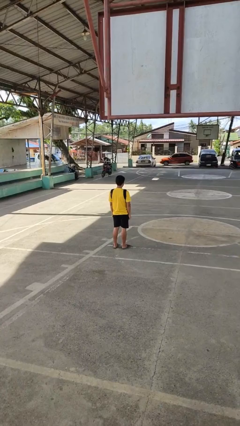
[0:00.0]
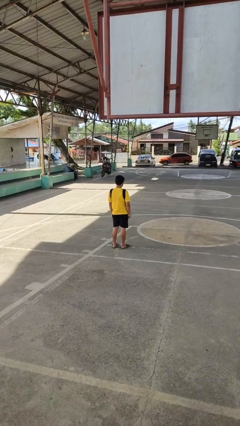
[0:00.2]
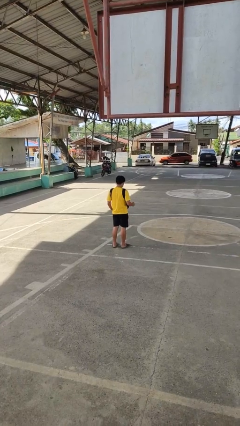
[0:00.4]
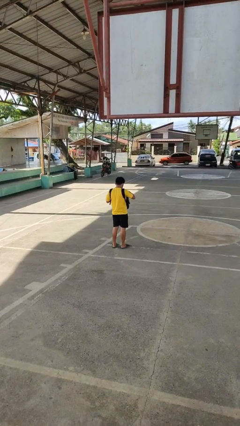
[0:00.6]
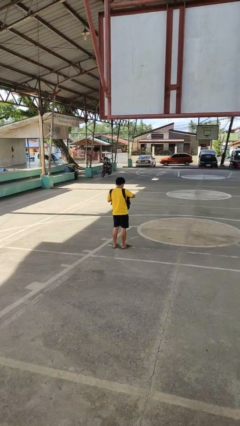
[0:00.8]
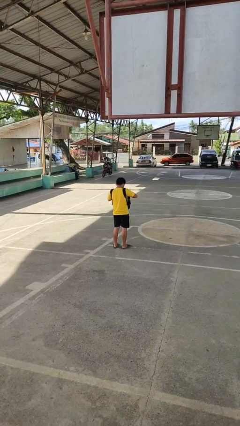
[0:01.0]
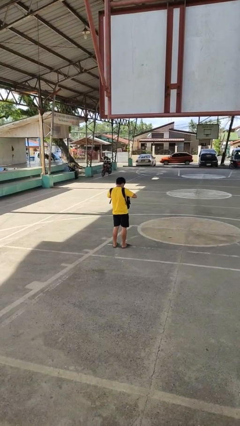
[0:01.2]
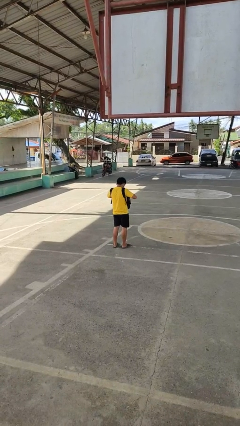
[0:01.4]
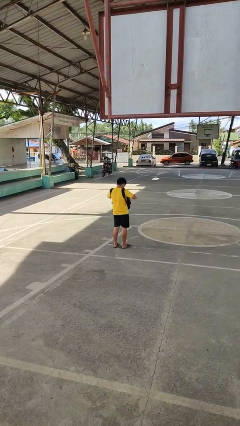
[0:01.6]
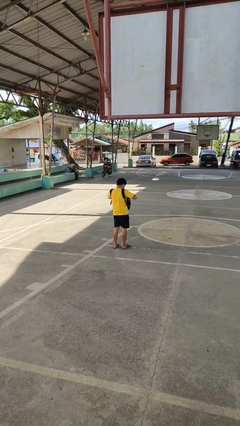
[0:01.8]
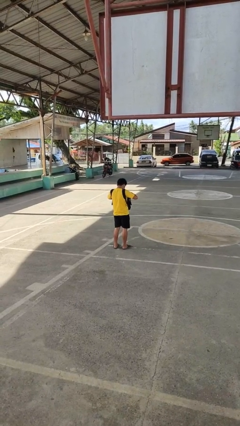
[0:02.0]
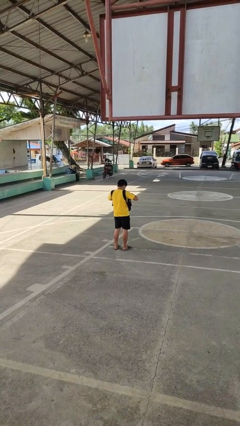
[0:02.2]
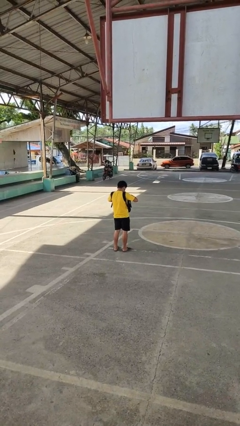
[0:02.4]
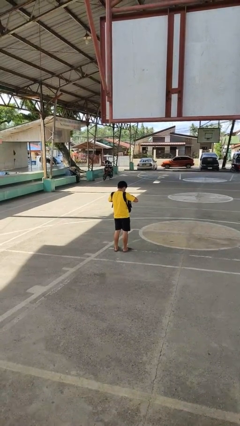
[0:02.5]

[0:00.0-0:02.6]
person searches in backpack

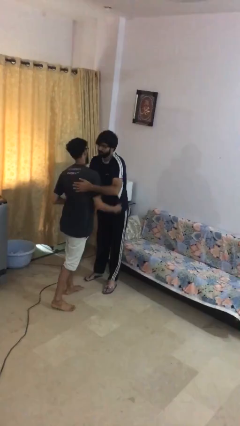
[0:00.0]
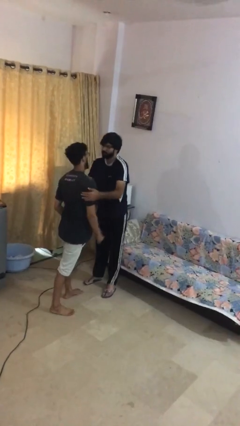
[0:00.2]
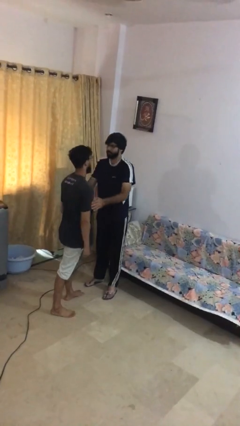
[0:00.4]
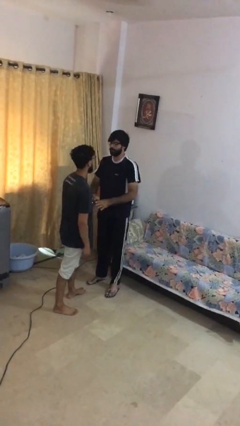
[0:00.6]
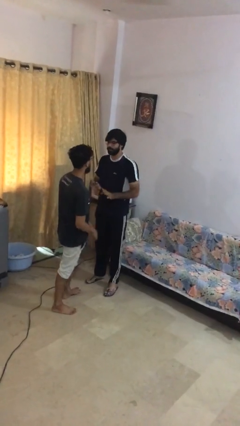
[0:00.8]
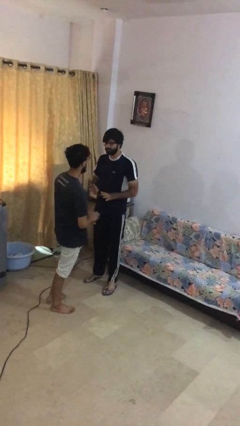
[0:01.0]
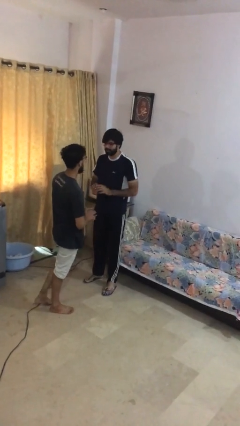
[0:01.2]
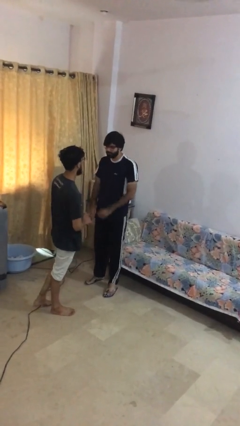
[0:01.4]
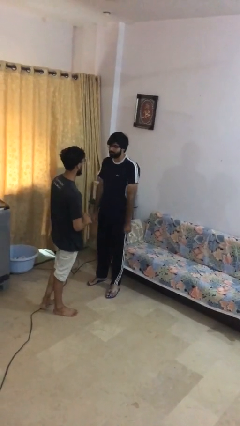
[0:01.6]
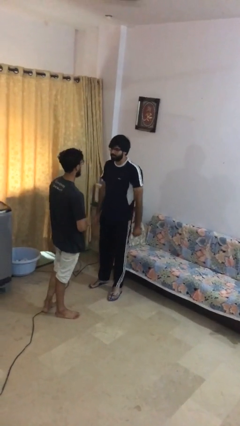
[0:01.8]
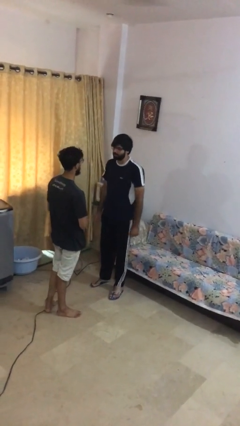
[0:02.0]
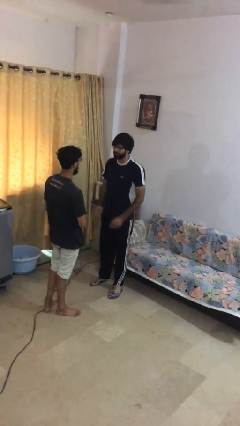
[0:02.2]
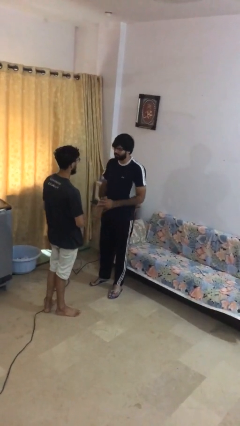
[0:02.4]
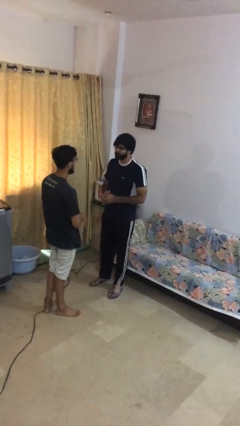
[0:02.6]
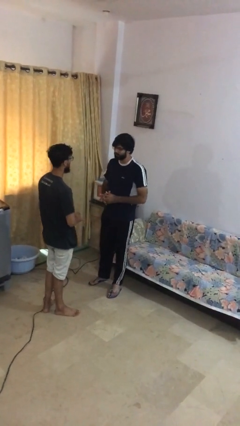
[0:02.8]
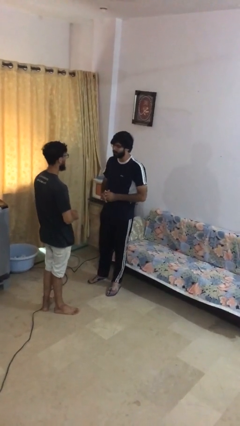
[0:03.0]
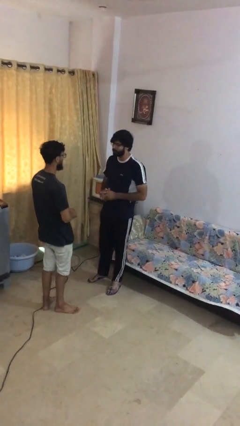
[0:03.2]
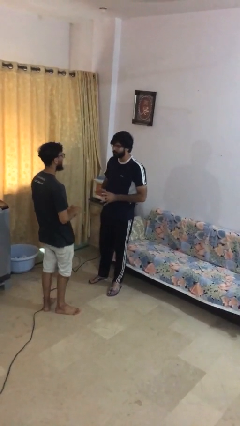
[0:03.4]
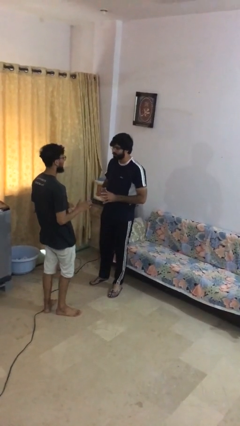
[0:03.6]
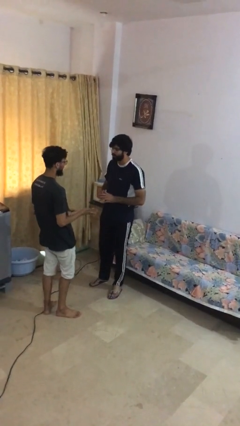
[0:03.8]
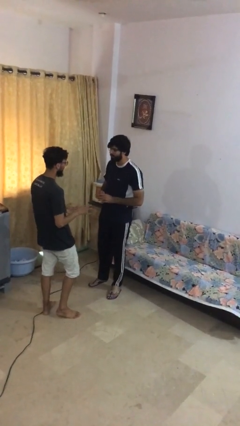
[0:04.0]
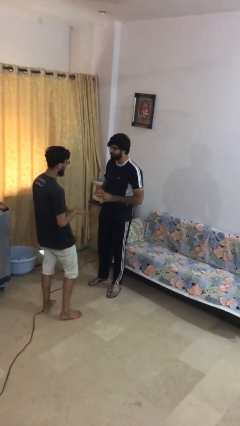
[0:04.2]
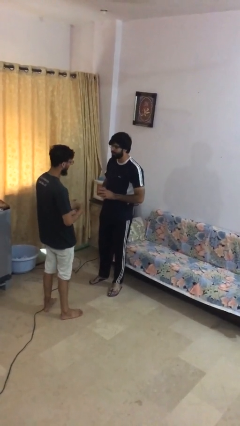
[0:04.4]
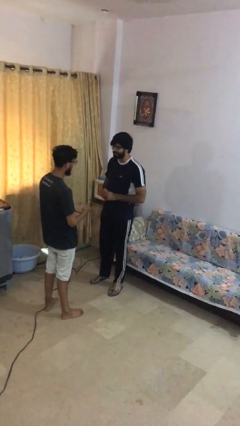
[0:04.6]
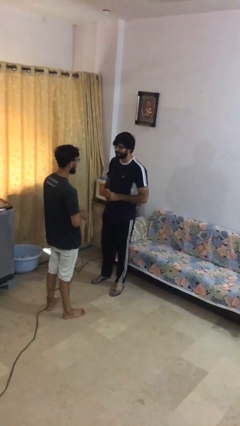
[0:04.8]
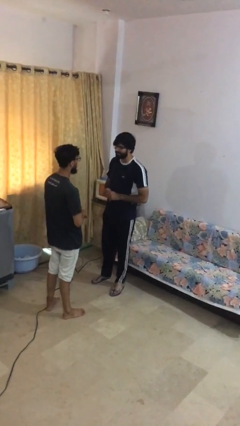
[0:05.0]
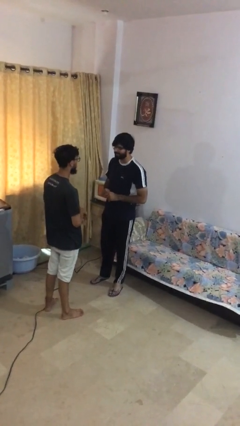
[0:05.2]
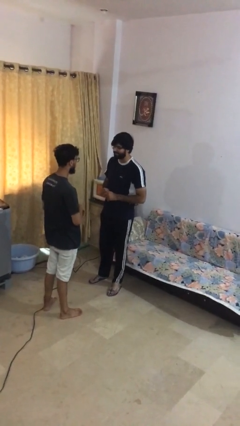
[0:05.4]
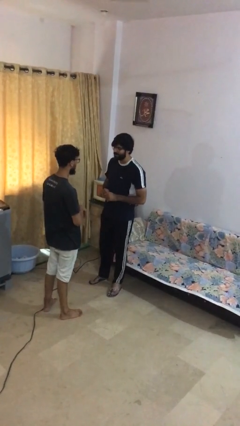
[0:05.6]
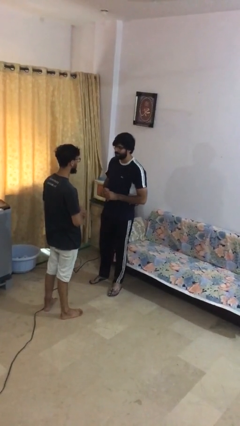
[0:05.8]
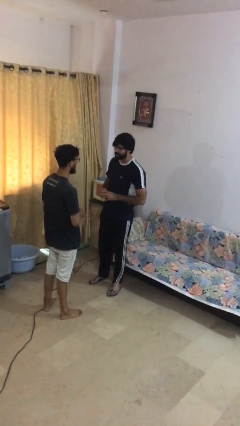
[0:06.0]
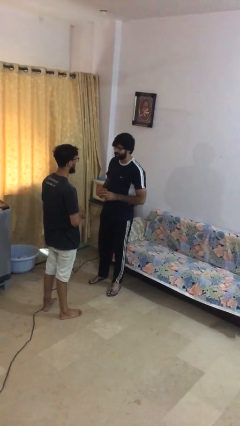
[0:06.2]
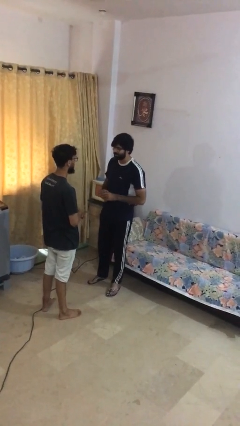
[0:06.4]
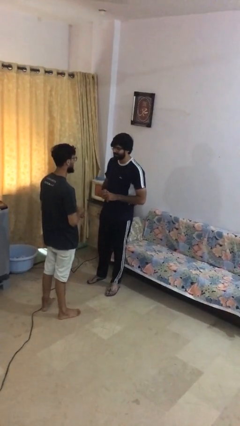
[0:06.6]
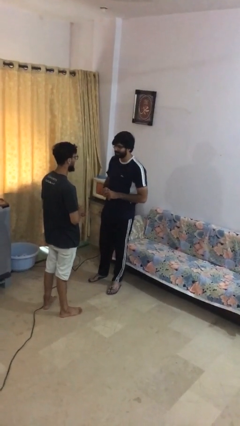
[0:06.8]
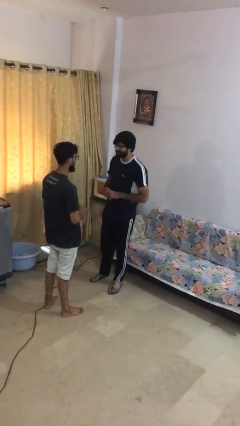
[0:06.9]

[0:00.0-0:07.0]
person talks to person

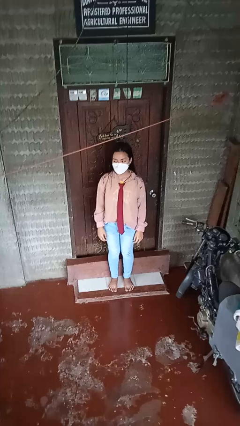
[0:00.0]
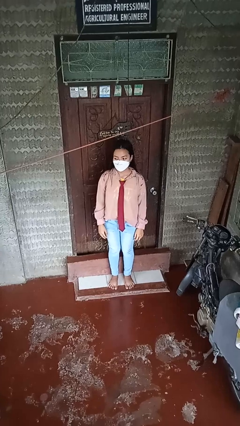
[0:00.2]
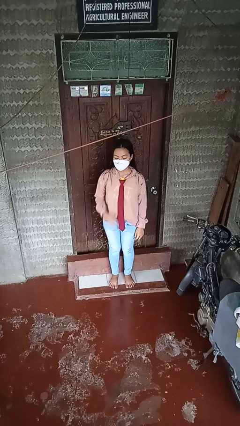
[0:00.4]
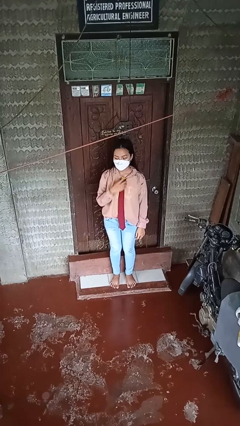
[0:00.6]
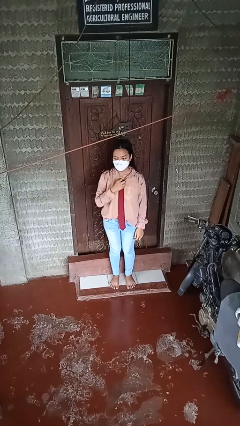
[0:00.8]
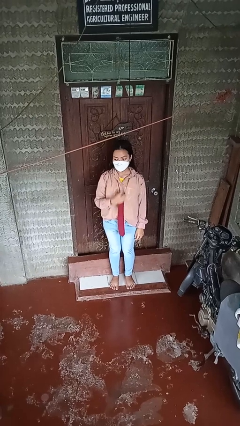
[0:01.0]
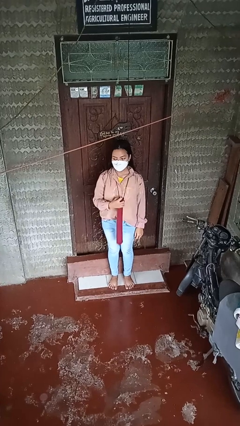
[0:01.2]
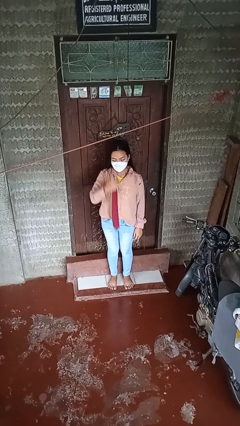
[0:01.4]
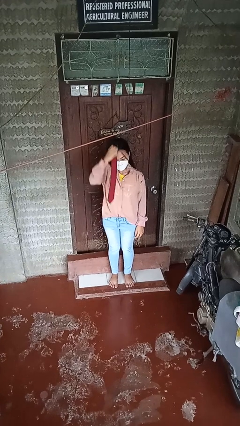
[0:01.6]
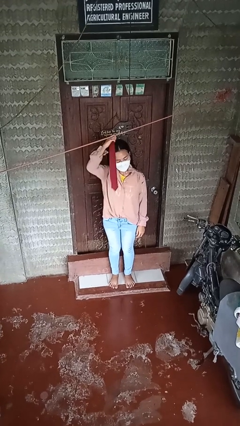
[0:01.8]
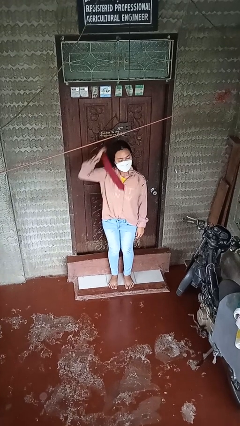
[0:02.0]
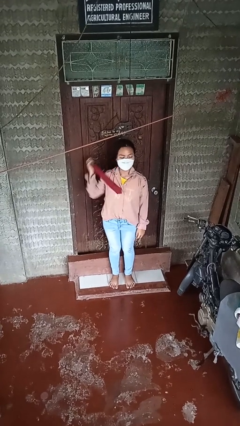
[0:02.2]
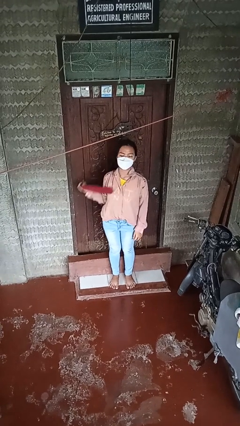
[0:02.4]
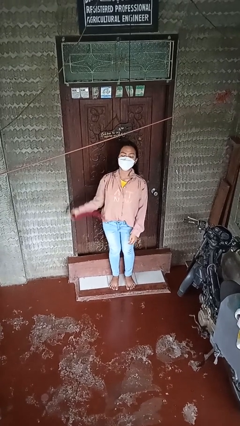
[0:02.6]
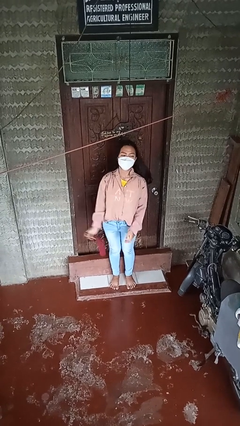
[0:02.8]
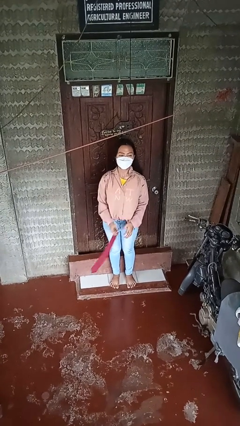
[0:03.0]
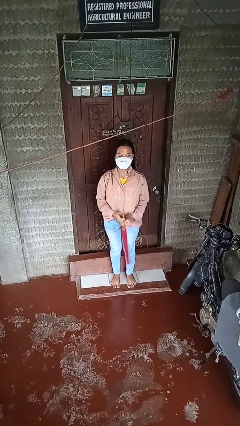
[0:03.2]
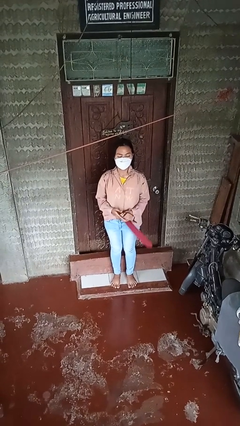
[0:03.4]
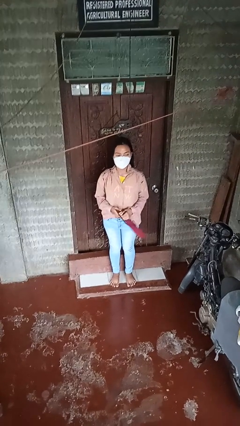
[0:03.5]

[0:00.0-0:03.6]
person takes off necktie

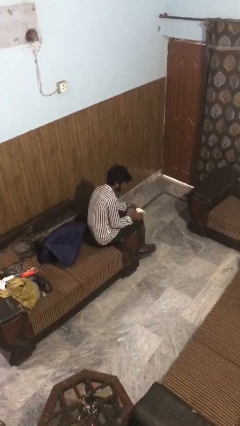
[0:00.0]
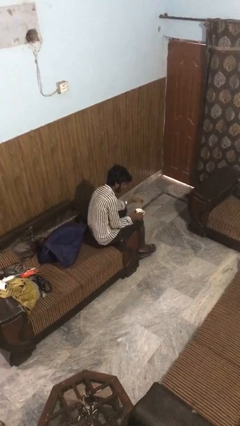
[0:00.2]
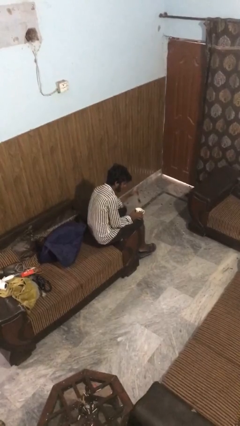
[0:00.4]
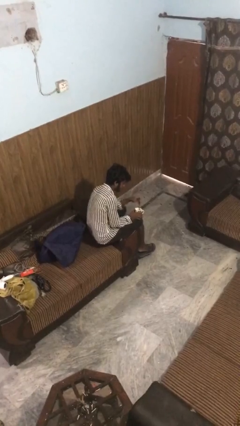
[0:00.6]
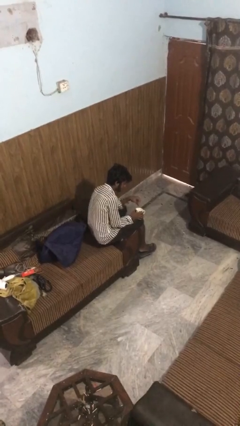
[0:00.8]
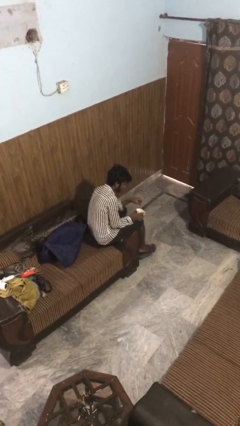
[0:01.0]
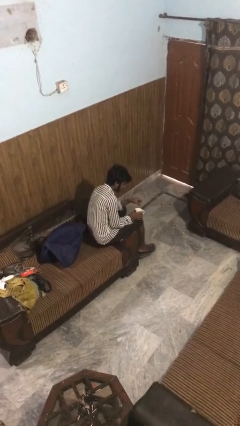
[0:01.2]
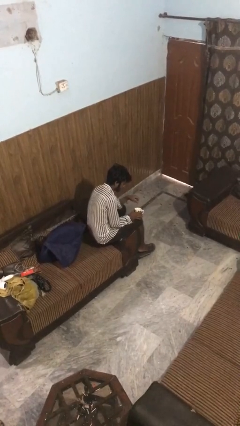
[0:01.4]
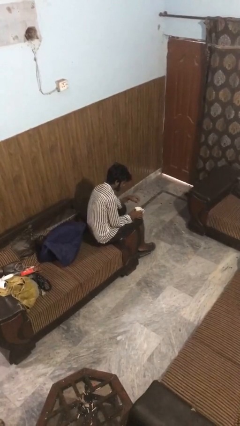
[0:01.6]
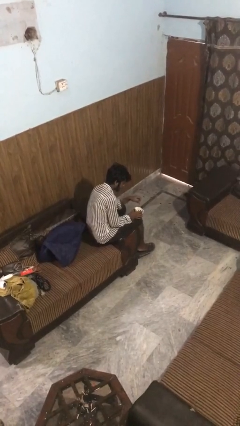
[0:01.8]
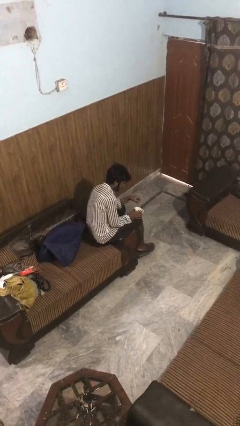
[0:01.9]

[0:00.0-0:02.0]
person stirs mug

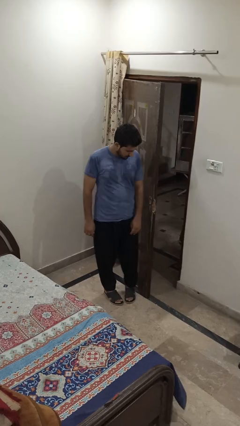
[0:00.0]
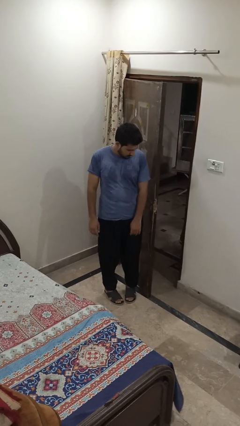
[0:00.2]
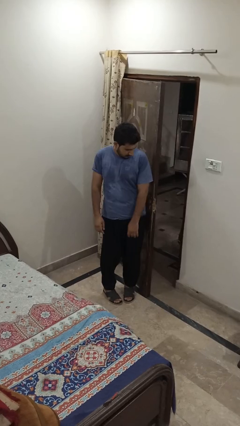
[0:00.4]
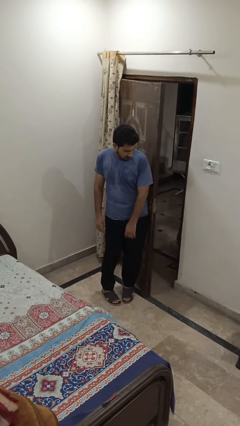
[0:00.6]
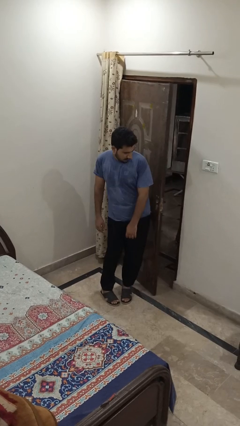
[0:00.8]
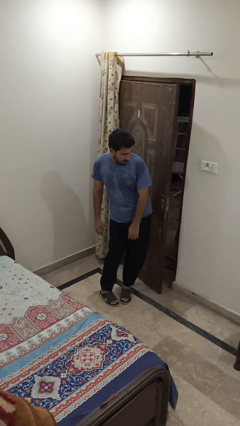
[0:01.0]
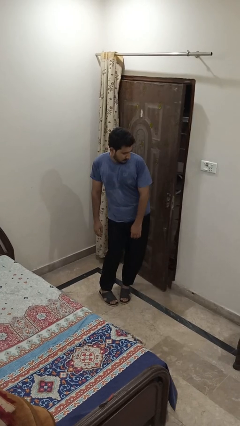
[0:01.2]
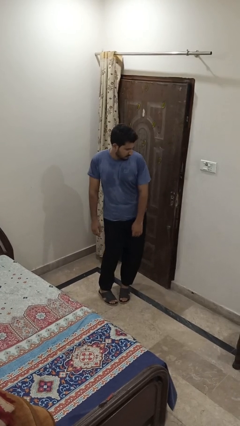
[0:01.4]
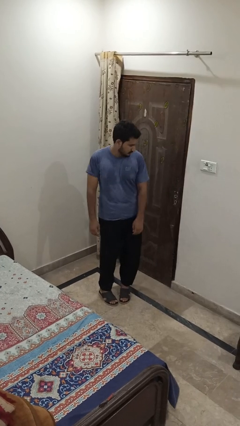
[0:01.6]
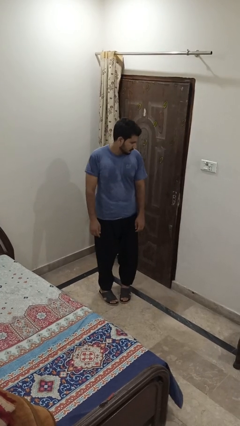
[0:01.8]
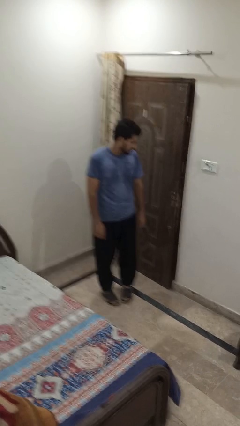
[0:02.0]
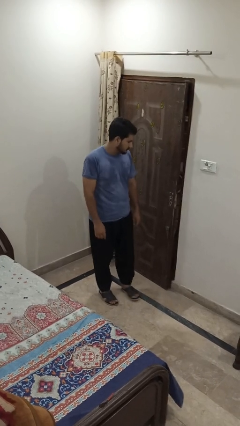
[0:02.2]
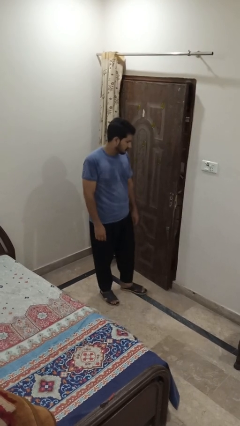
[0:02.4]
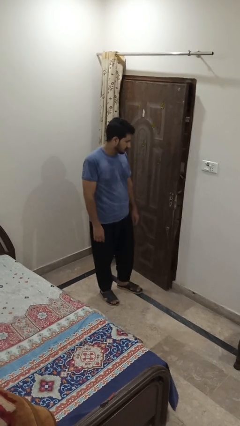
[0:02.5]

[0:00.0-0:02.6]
person closes door with hip
